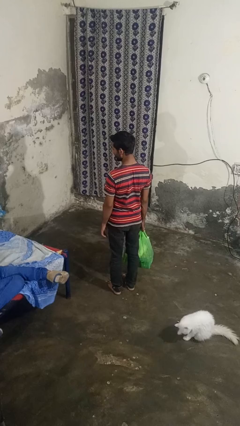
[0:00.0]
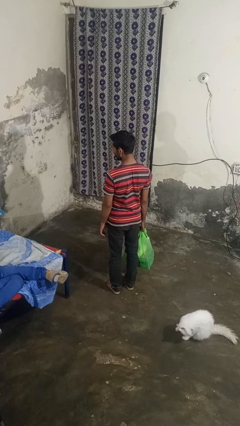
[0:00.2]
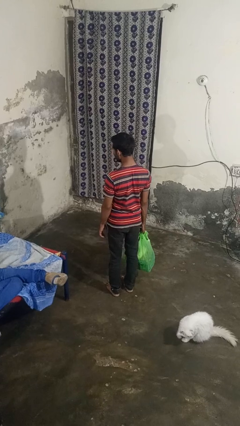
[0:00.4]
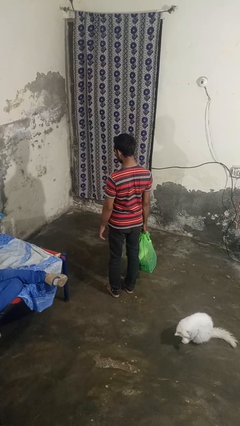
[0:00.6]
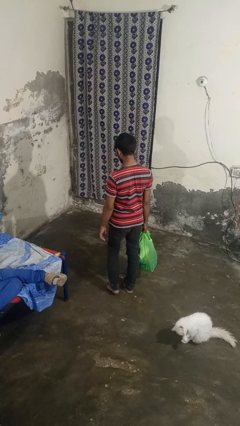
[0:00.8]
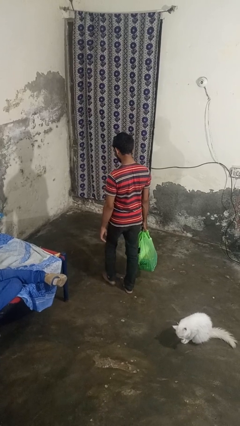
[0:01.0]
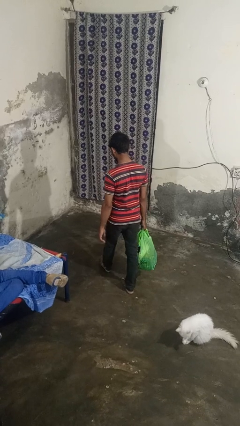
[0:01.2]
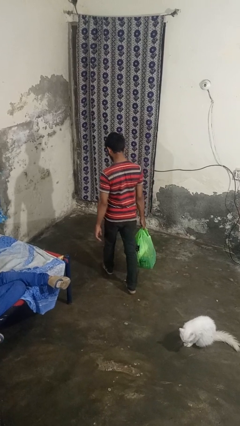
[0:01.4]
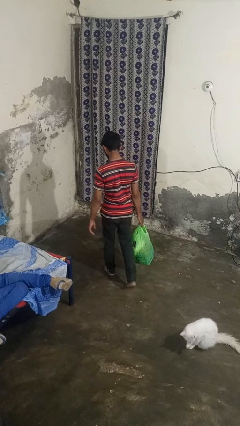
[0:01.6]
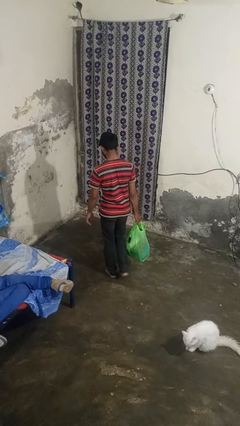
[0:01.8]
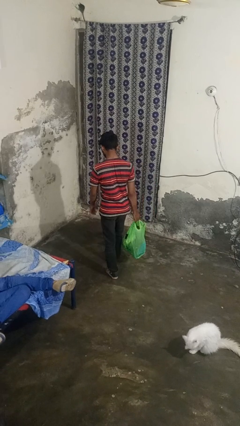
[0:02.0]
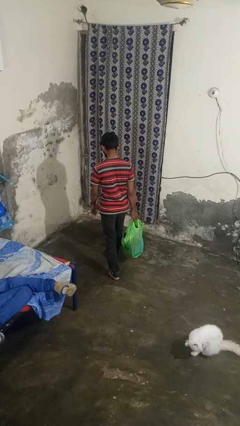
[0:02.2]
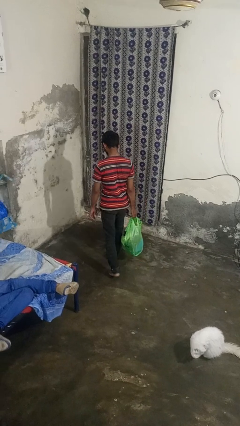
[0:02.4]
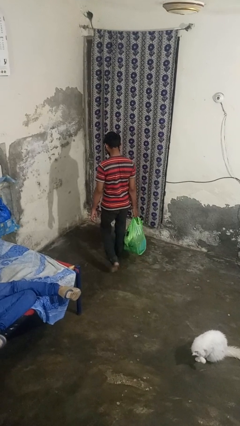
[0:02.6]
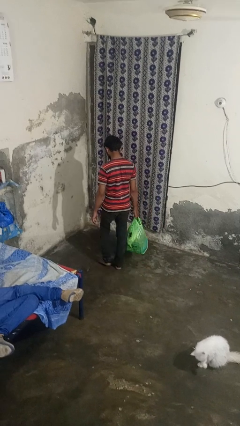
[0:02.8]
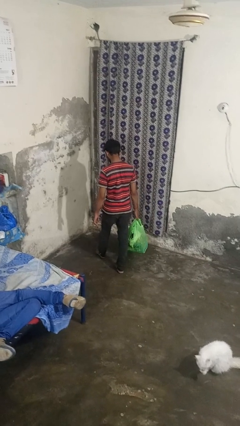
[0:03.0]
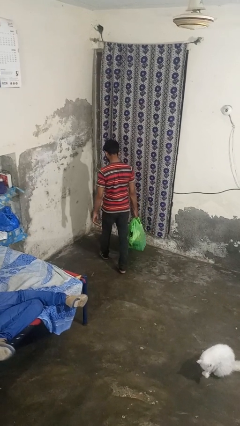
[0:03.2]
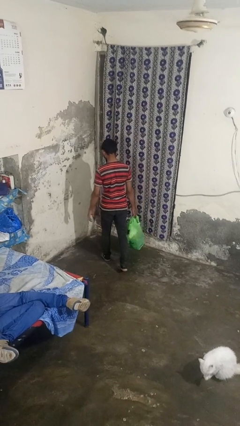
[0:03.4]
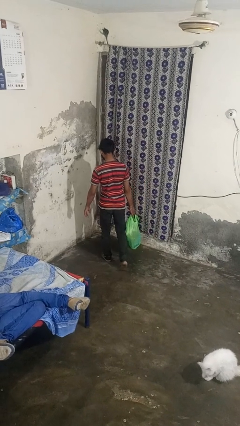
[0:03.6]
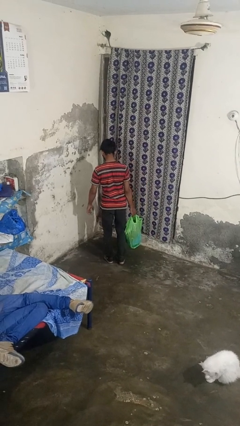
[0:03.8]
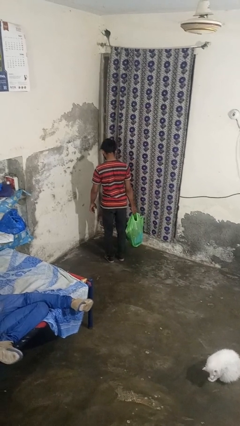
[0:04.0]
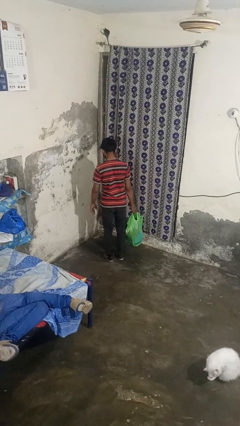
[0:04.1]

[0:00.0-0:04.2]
person carries groceries

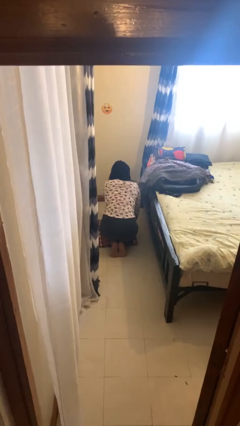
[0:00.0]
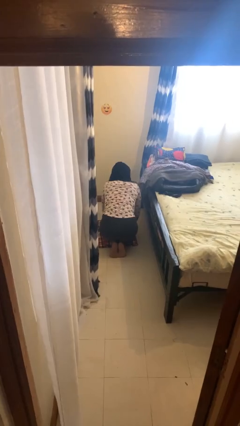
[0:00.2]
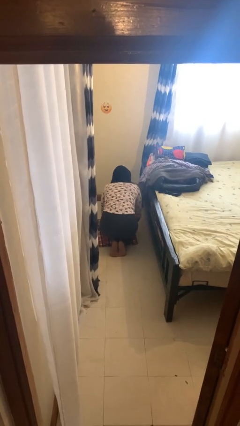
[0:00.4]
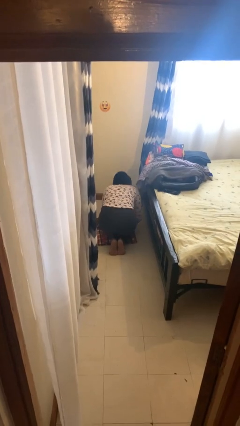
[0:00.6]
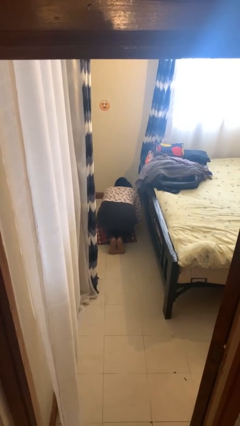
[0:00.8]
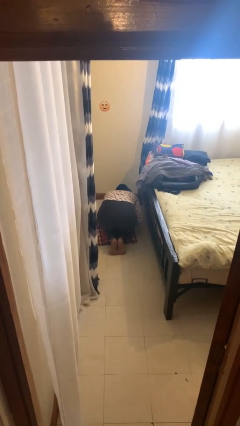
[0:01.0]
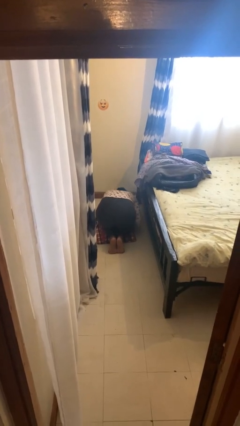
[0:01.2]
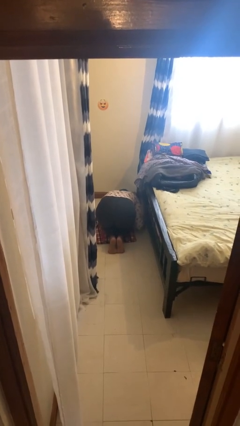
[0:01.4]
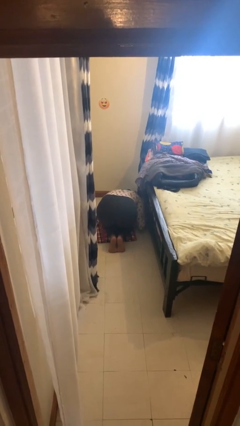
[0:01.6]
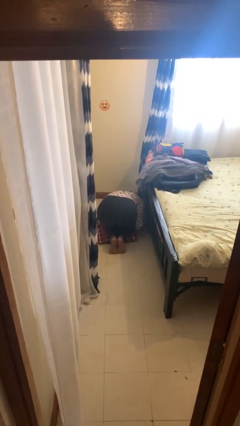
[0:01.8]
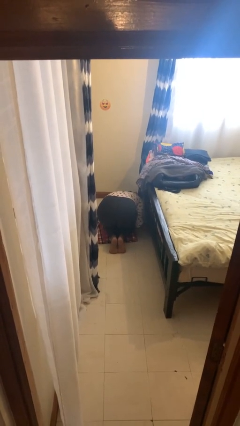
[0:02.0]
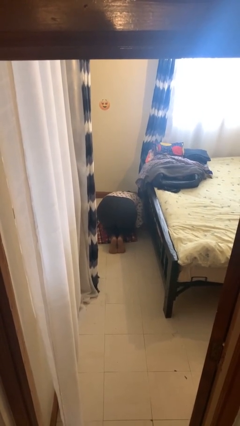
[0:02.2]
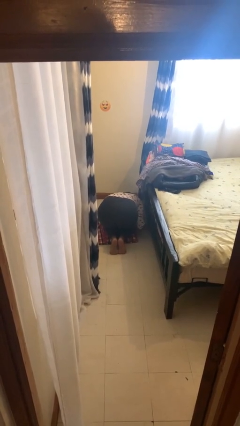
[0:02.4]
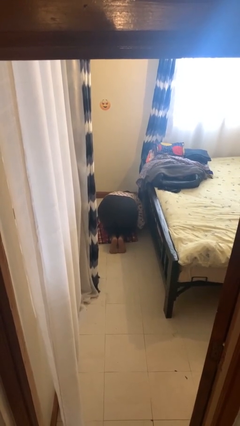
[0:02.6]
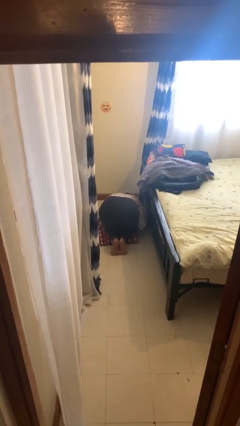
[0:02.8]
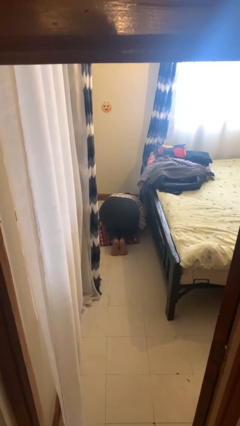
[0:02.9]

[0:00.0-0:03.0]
person searches under bed

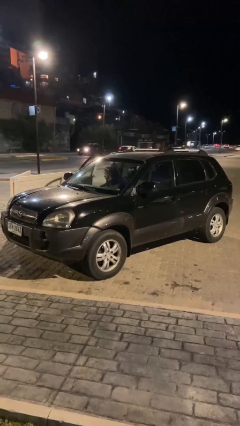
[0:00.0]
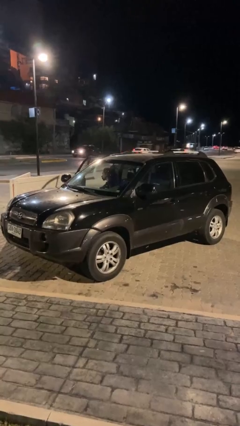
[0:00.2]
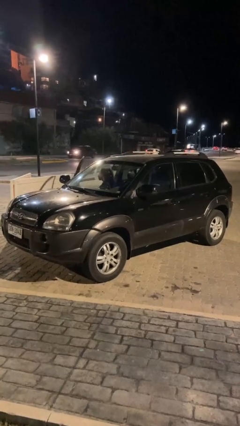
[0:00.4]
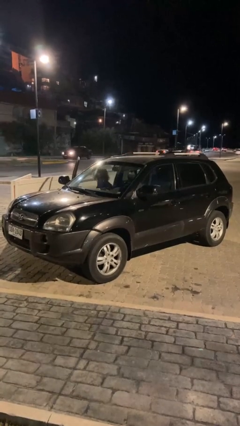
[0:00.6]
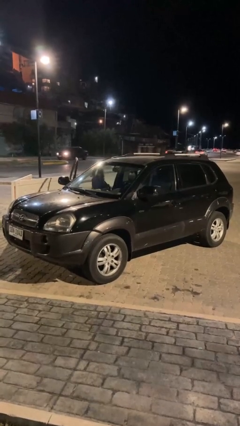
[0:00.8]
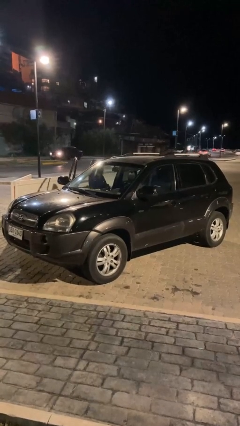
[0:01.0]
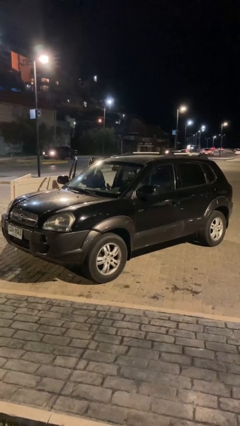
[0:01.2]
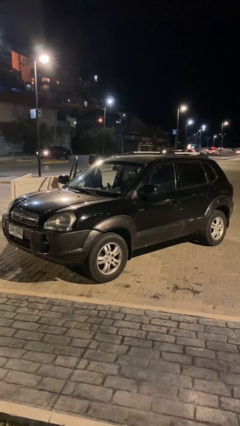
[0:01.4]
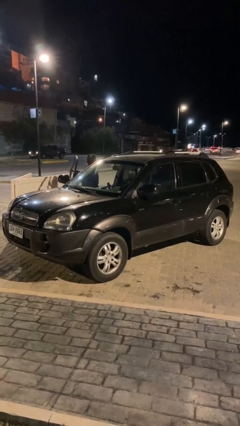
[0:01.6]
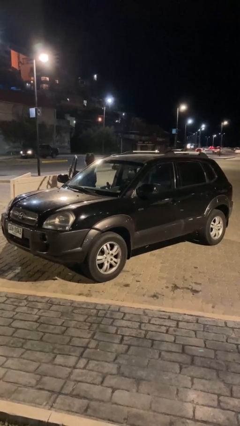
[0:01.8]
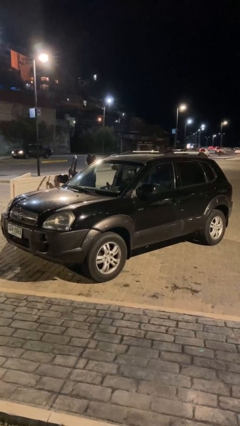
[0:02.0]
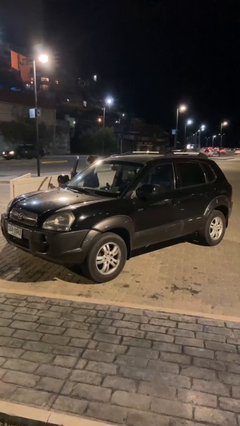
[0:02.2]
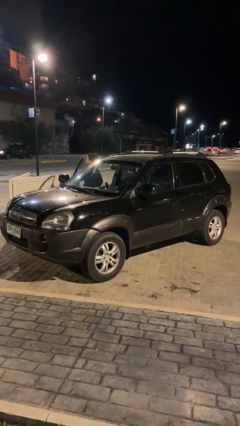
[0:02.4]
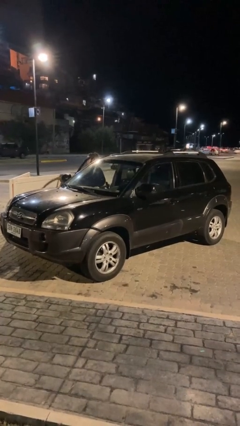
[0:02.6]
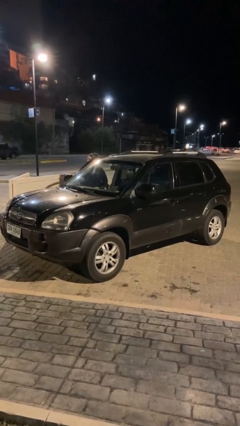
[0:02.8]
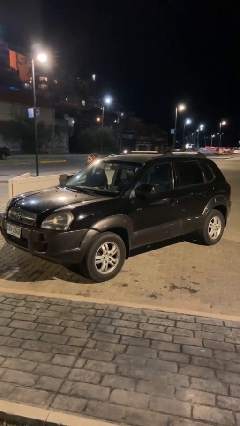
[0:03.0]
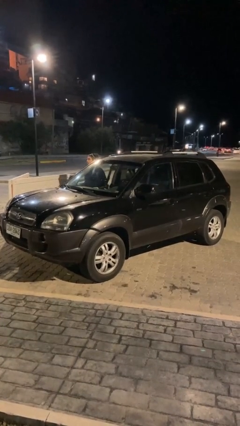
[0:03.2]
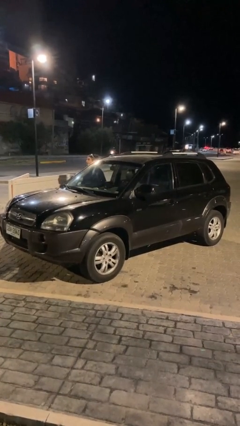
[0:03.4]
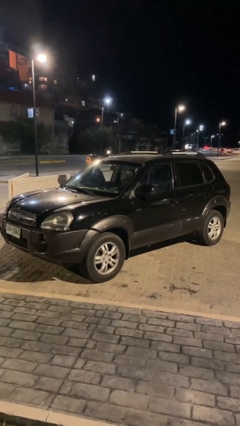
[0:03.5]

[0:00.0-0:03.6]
car drops off person

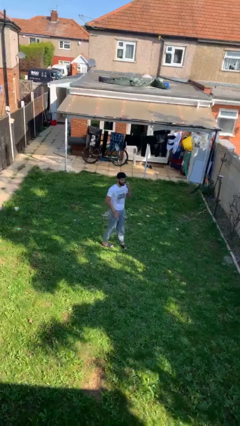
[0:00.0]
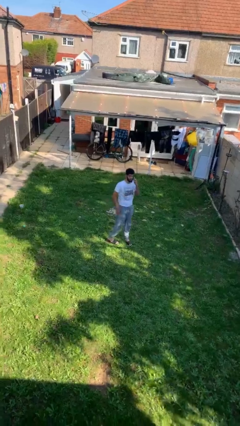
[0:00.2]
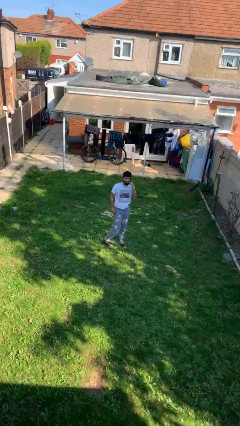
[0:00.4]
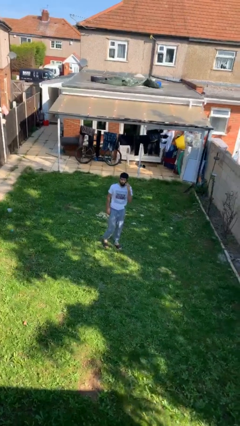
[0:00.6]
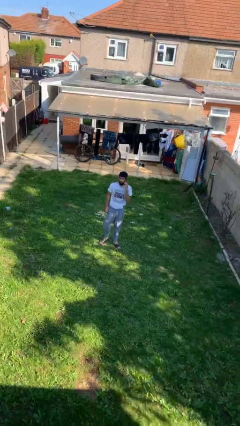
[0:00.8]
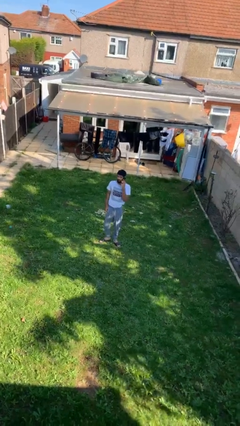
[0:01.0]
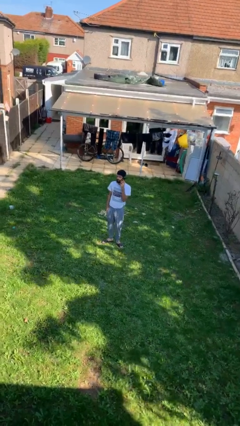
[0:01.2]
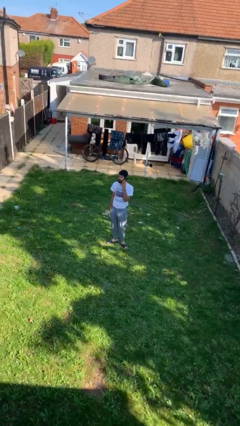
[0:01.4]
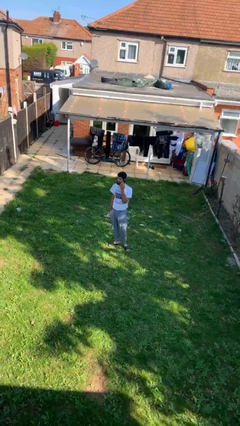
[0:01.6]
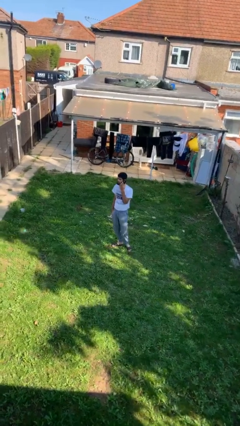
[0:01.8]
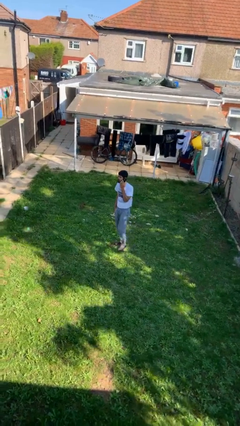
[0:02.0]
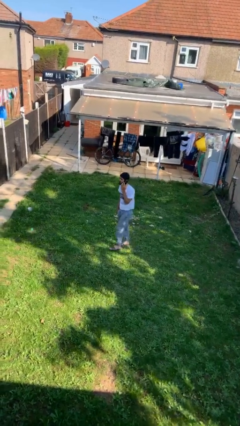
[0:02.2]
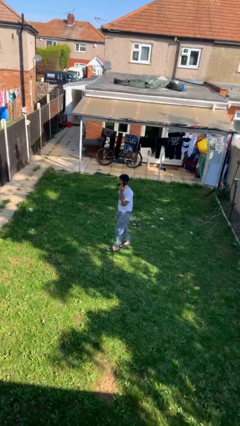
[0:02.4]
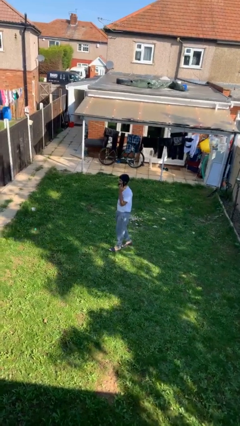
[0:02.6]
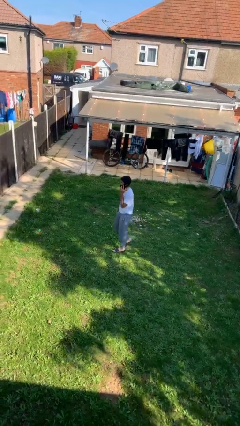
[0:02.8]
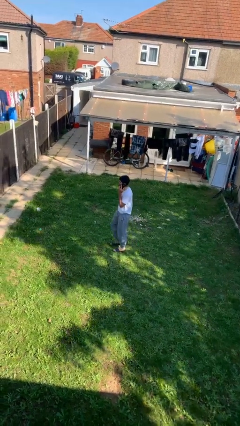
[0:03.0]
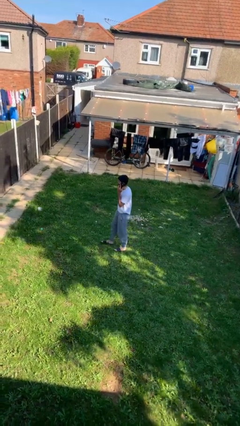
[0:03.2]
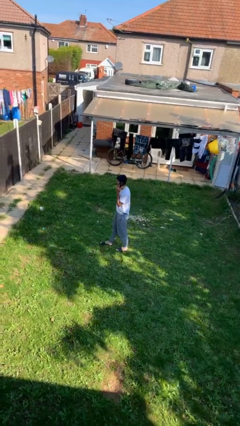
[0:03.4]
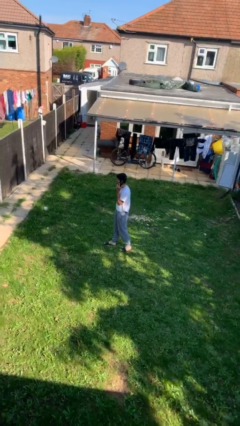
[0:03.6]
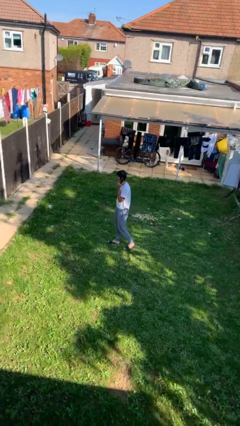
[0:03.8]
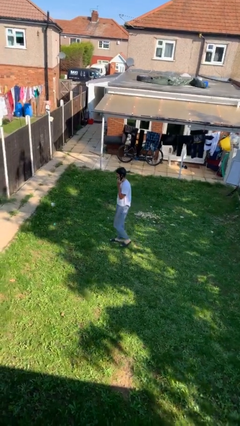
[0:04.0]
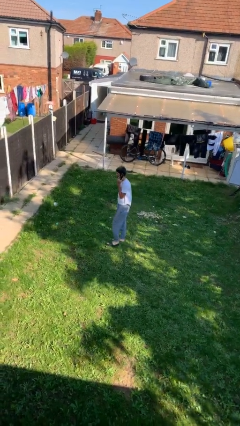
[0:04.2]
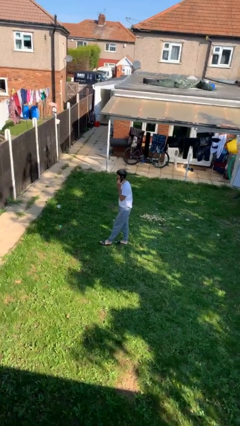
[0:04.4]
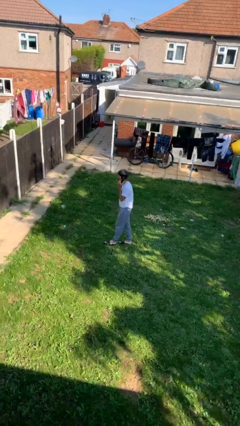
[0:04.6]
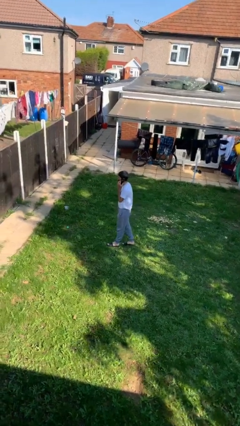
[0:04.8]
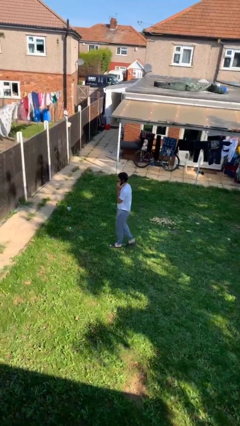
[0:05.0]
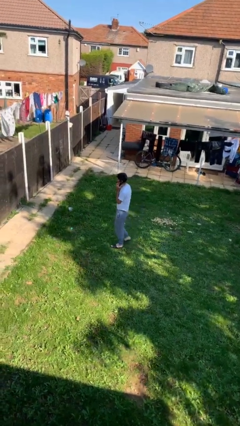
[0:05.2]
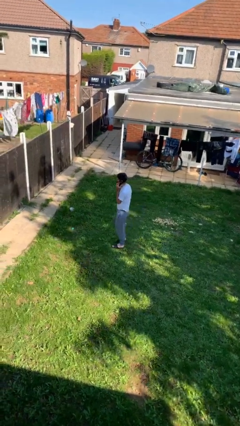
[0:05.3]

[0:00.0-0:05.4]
person talks on phone

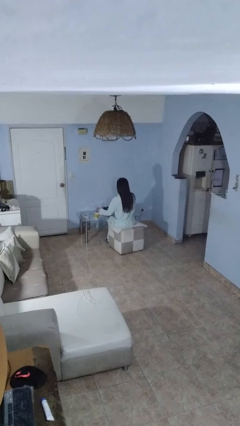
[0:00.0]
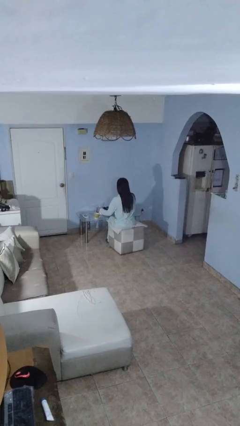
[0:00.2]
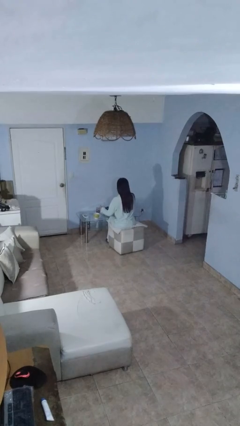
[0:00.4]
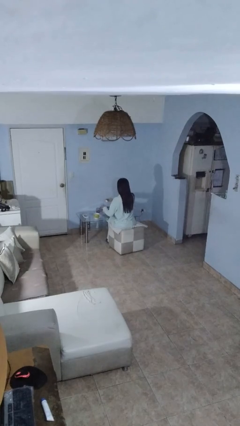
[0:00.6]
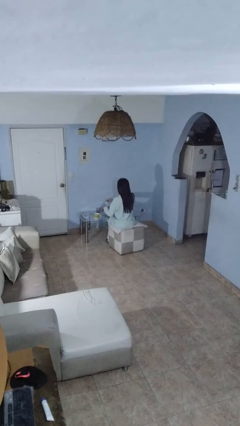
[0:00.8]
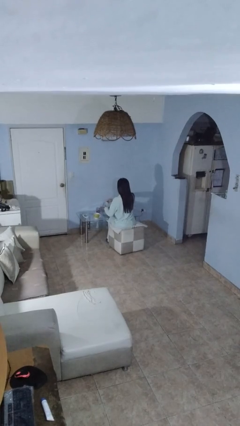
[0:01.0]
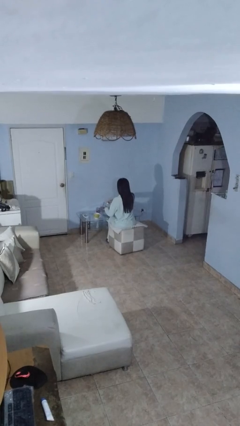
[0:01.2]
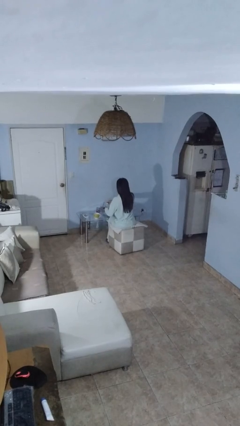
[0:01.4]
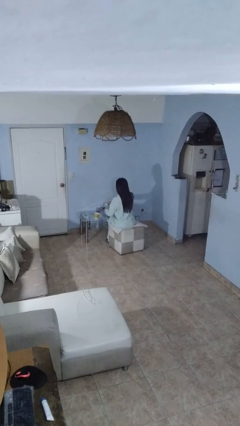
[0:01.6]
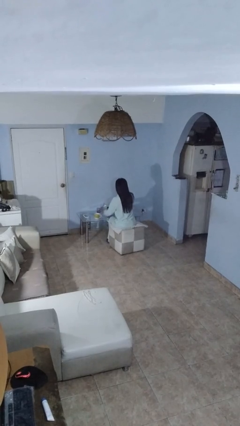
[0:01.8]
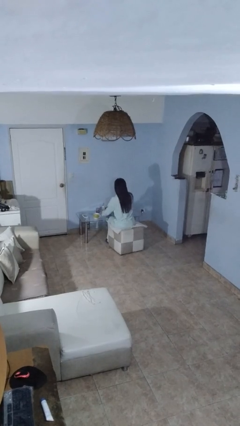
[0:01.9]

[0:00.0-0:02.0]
person screws lid to bottle
